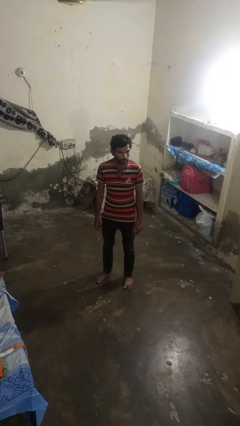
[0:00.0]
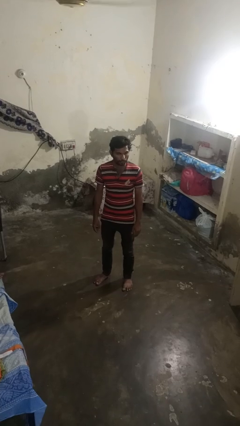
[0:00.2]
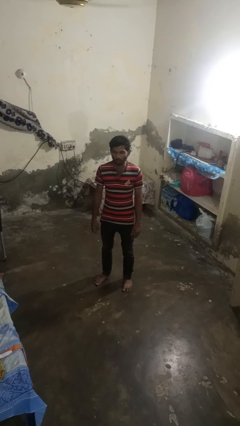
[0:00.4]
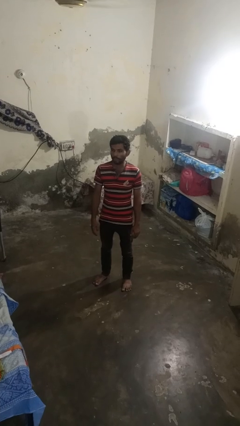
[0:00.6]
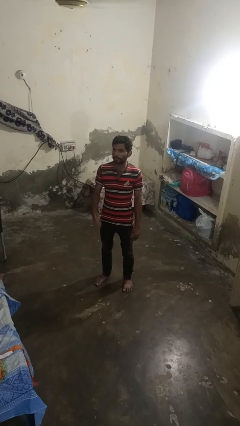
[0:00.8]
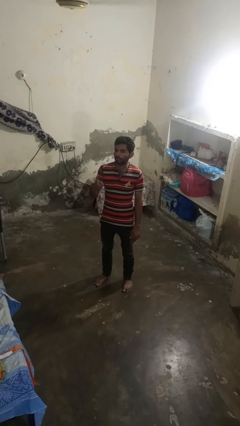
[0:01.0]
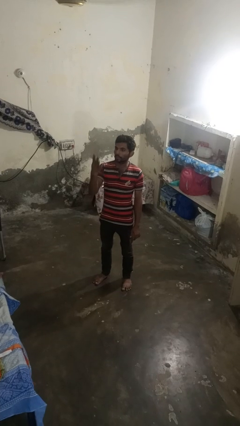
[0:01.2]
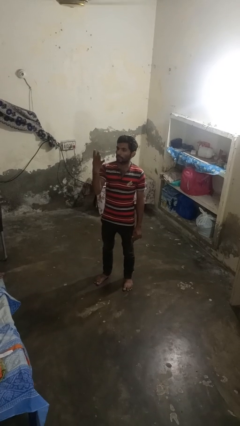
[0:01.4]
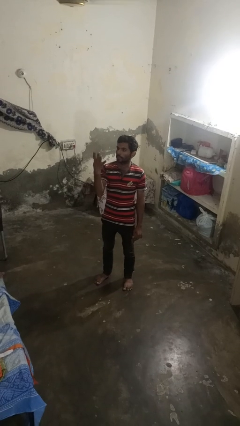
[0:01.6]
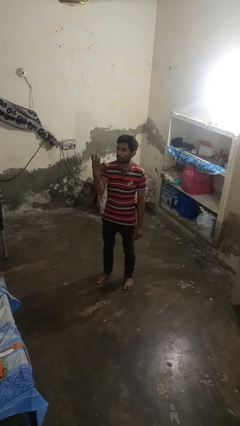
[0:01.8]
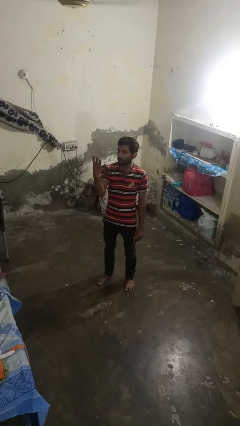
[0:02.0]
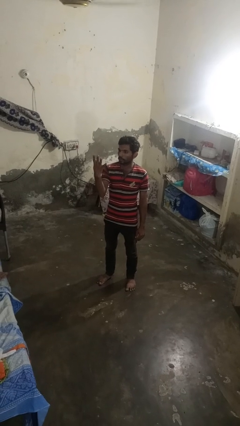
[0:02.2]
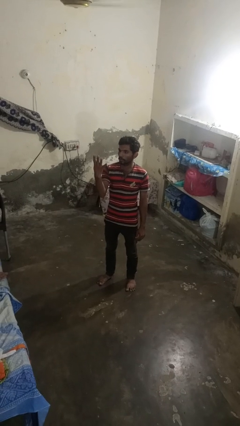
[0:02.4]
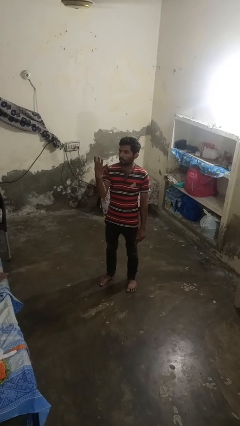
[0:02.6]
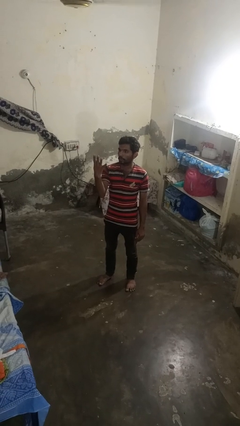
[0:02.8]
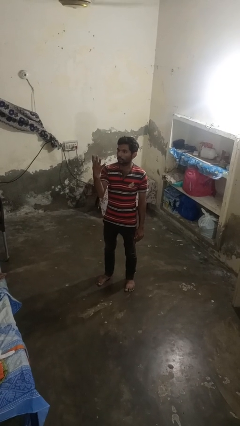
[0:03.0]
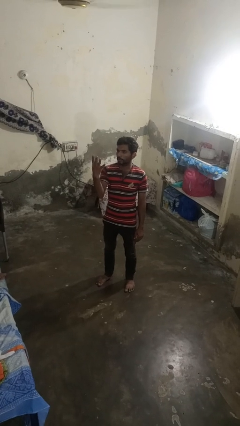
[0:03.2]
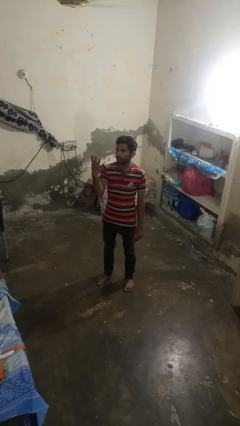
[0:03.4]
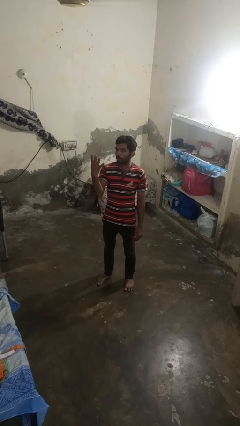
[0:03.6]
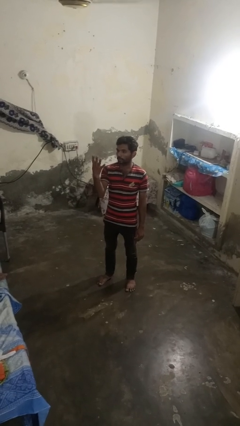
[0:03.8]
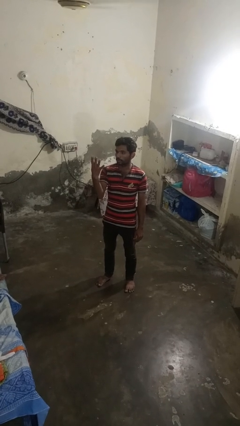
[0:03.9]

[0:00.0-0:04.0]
person gestures number four

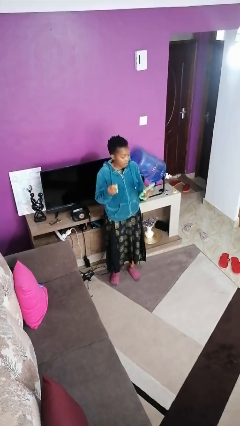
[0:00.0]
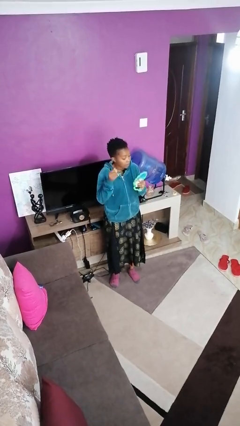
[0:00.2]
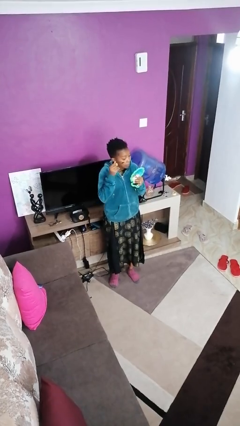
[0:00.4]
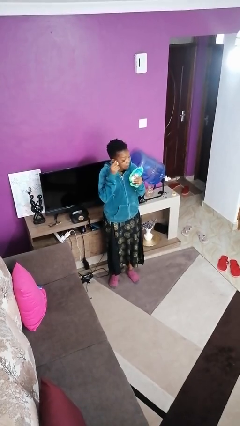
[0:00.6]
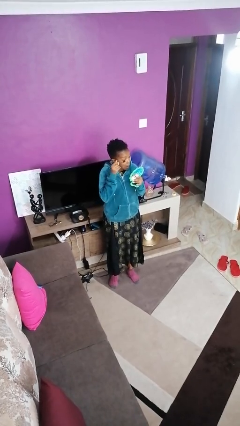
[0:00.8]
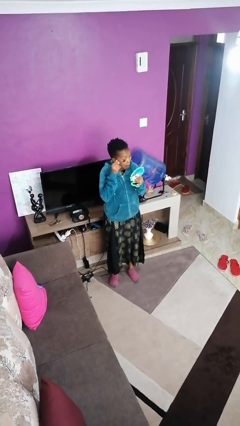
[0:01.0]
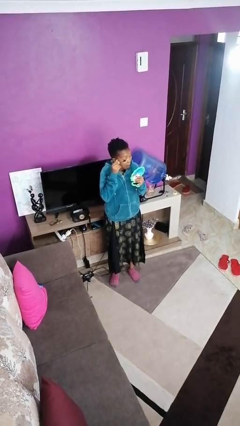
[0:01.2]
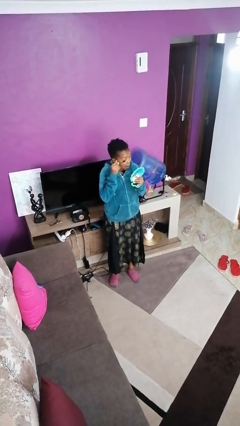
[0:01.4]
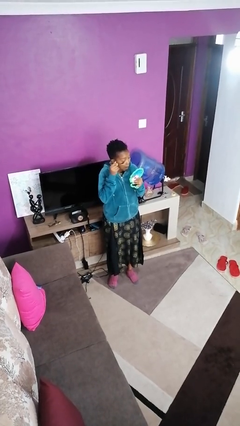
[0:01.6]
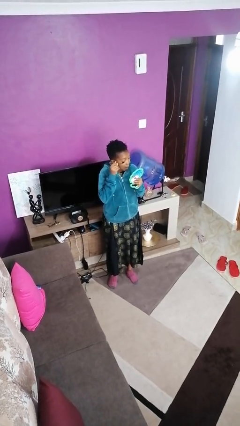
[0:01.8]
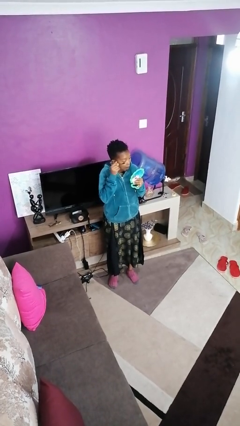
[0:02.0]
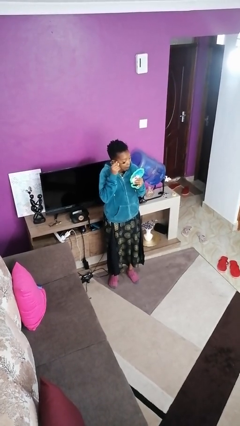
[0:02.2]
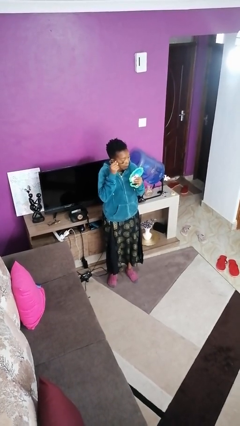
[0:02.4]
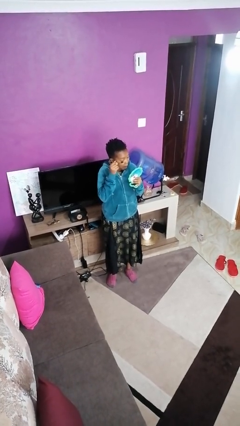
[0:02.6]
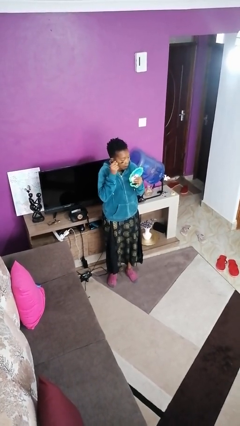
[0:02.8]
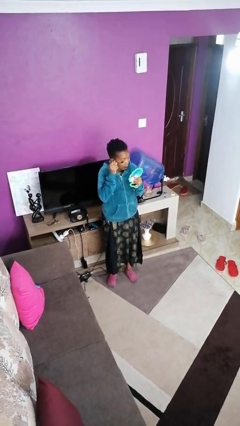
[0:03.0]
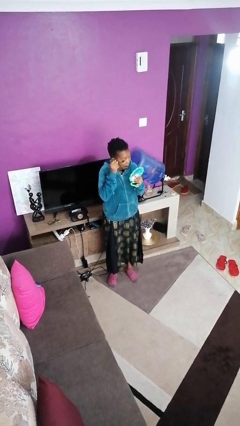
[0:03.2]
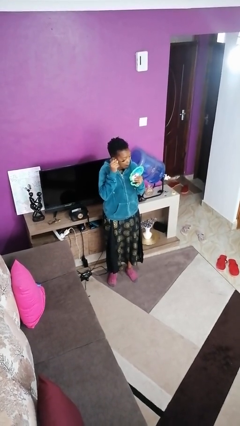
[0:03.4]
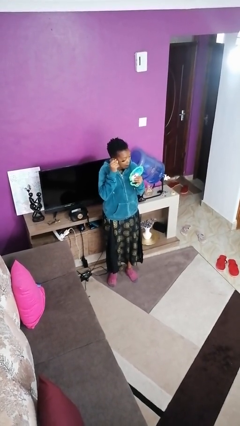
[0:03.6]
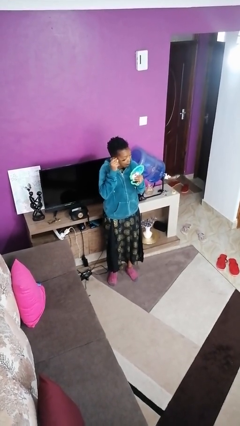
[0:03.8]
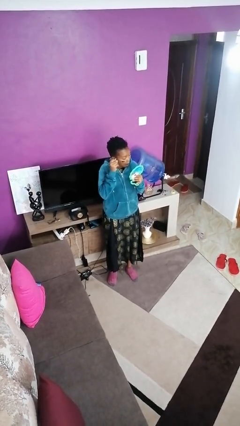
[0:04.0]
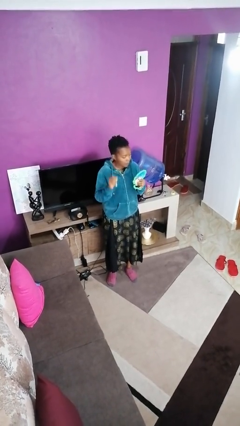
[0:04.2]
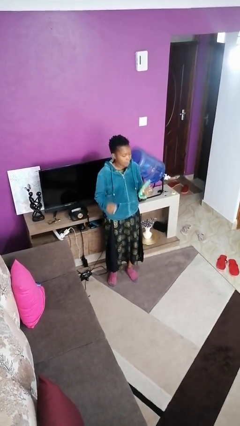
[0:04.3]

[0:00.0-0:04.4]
person applies eye makeup

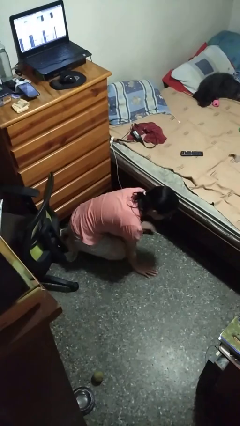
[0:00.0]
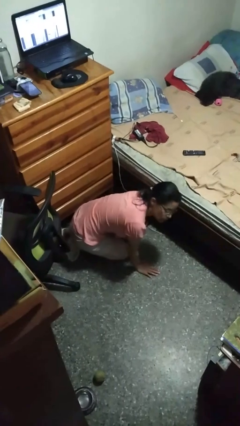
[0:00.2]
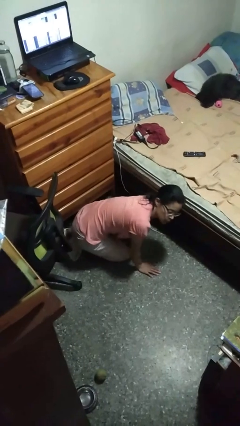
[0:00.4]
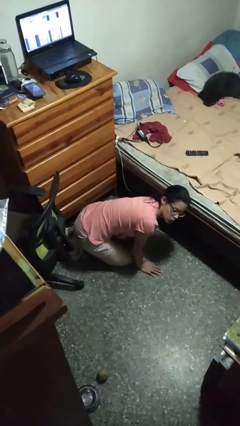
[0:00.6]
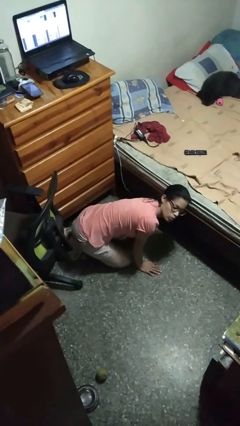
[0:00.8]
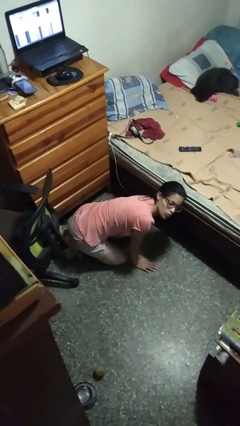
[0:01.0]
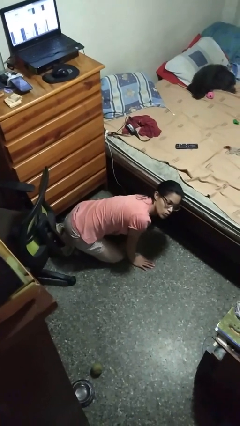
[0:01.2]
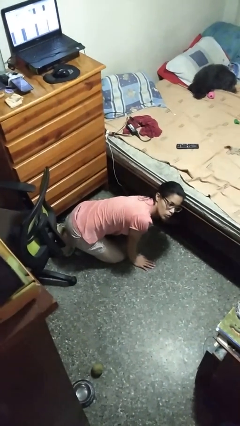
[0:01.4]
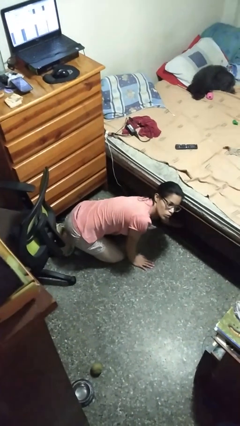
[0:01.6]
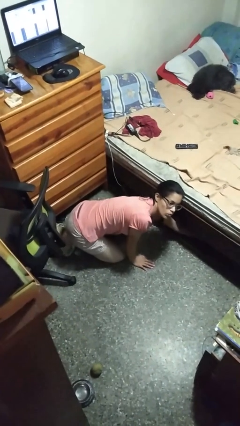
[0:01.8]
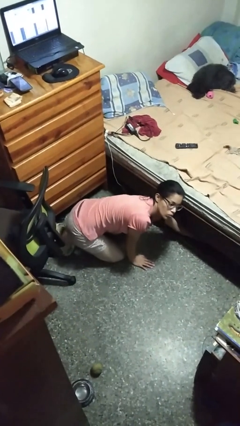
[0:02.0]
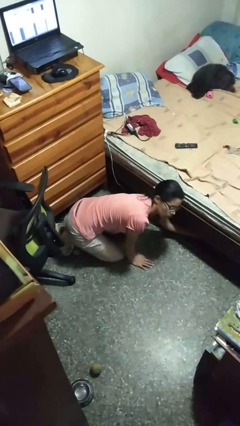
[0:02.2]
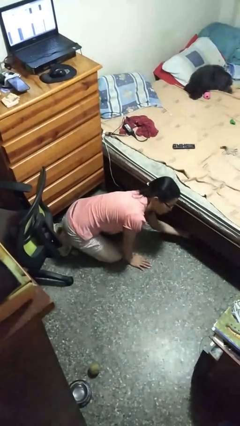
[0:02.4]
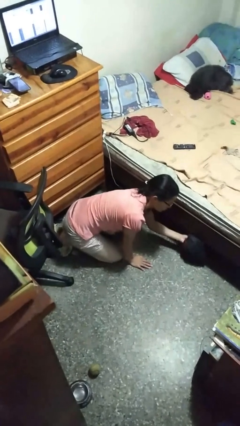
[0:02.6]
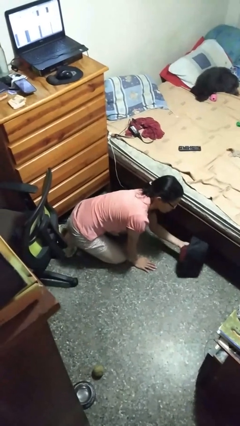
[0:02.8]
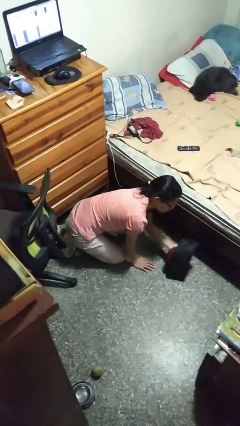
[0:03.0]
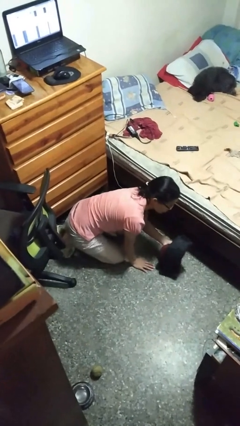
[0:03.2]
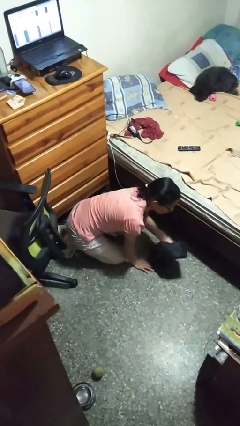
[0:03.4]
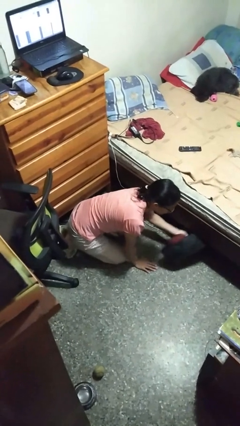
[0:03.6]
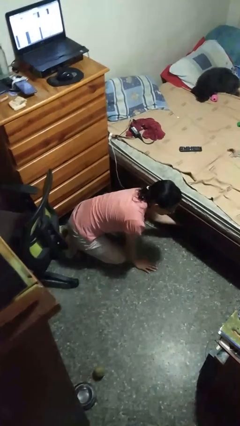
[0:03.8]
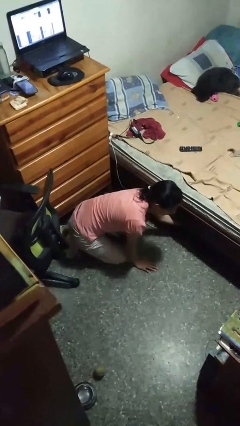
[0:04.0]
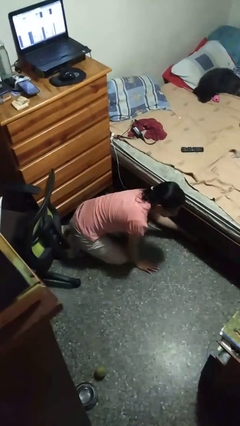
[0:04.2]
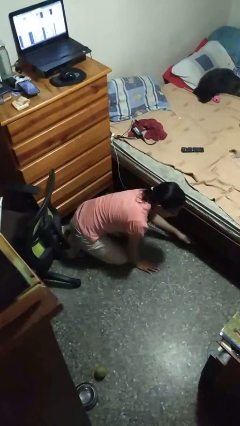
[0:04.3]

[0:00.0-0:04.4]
person searches under bed

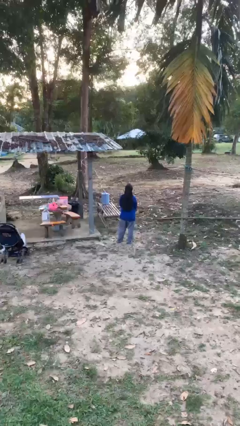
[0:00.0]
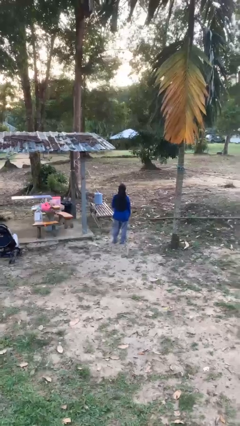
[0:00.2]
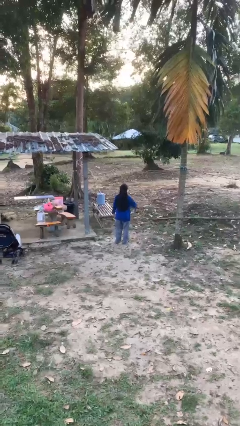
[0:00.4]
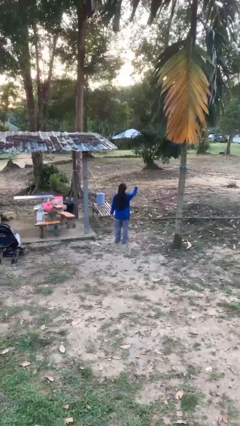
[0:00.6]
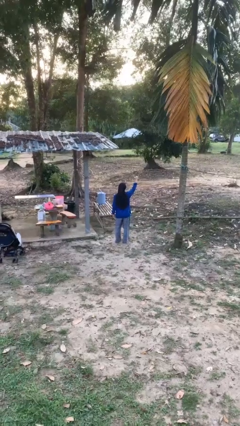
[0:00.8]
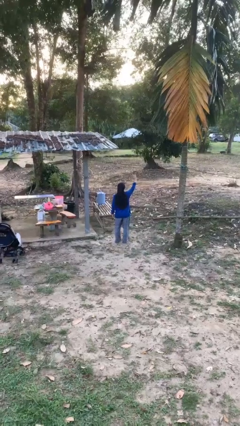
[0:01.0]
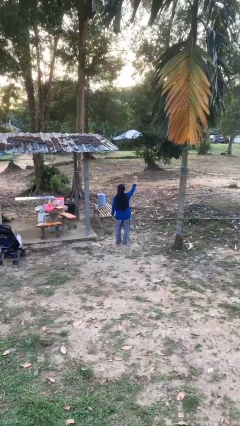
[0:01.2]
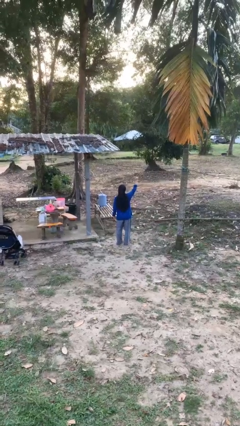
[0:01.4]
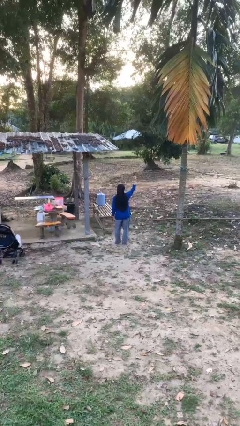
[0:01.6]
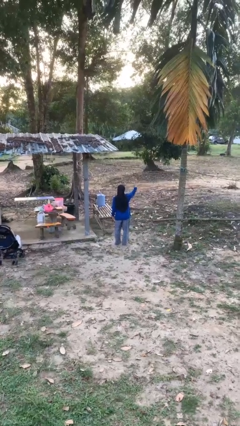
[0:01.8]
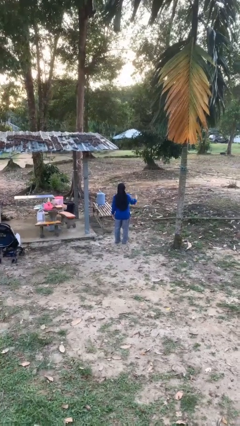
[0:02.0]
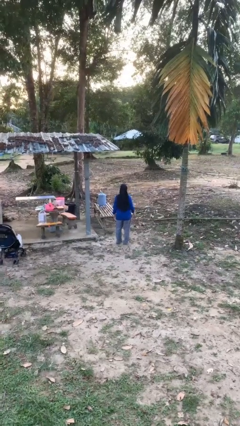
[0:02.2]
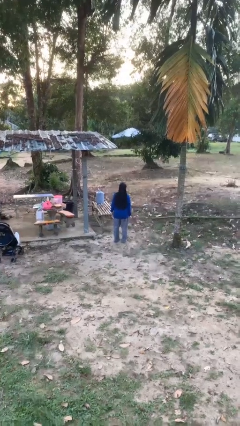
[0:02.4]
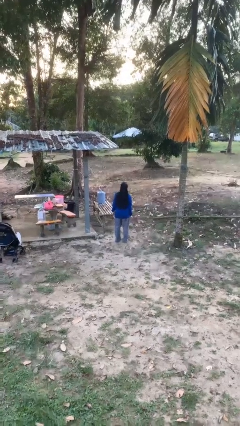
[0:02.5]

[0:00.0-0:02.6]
person gestures hang loose

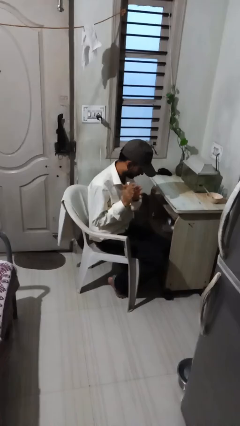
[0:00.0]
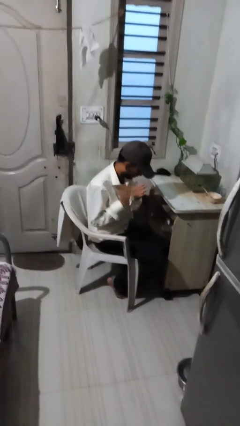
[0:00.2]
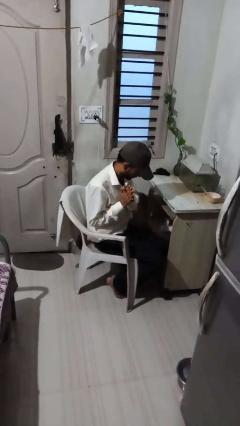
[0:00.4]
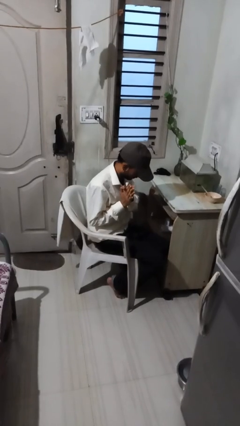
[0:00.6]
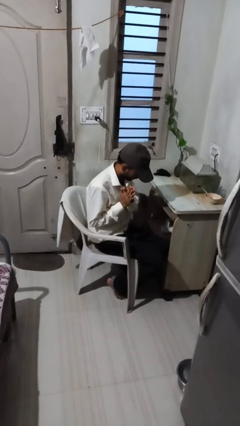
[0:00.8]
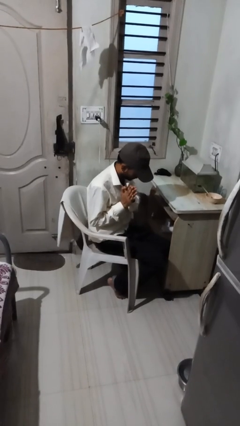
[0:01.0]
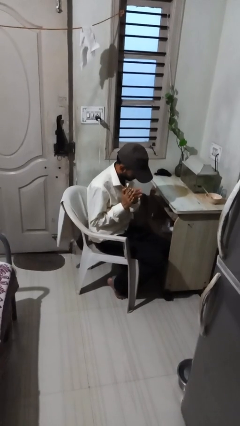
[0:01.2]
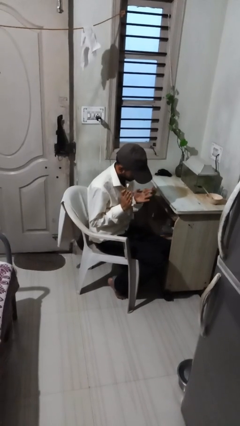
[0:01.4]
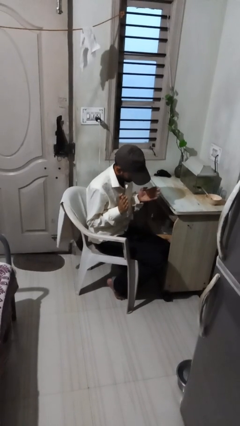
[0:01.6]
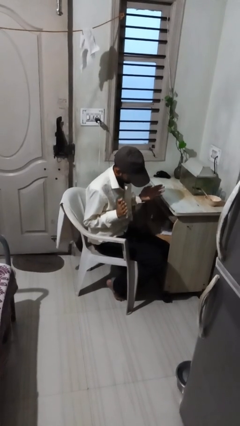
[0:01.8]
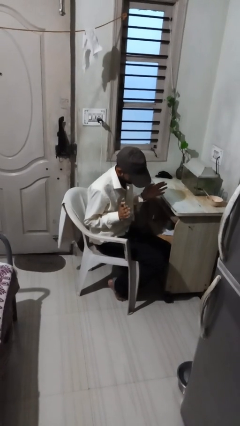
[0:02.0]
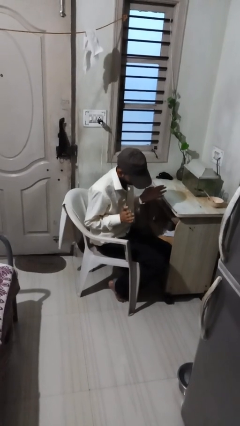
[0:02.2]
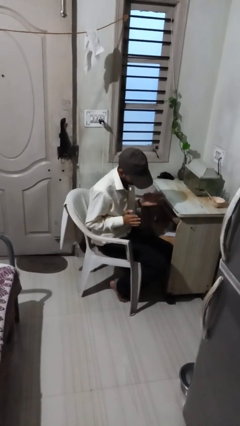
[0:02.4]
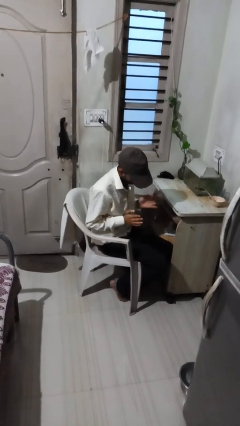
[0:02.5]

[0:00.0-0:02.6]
person claps hands
